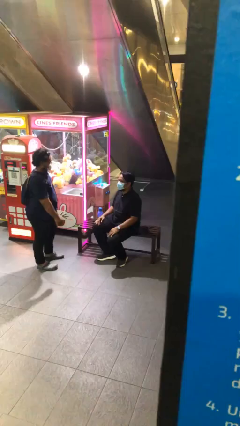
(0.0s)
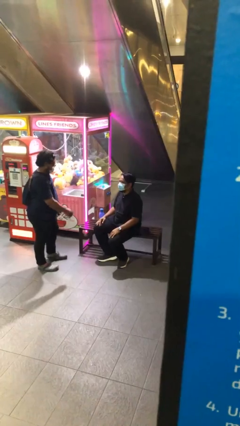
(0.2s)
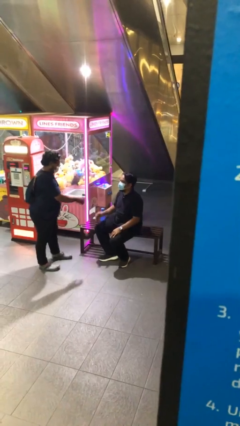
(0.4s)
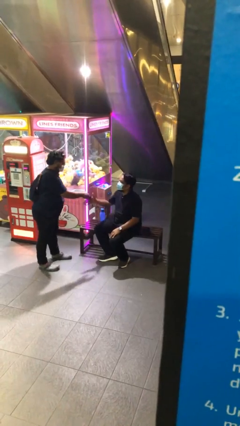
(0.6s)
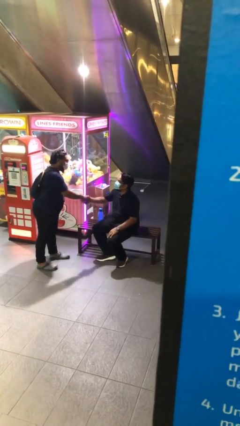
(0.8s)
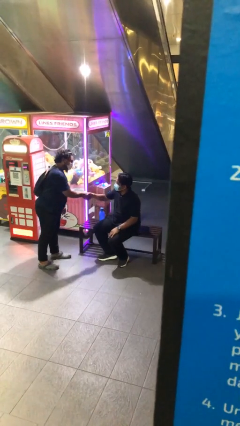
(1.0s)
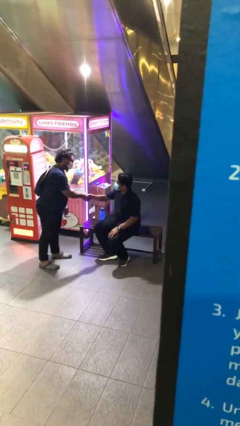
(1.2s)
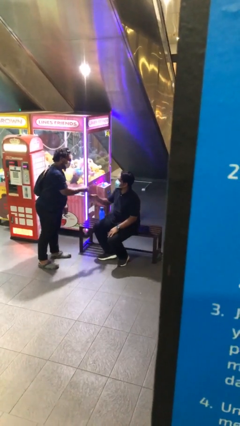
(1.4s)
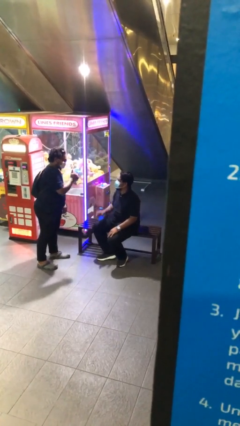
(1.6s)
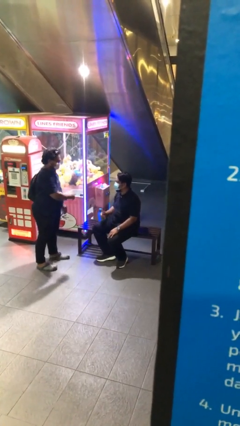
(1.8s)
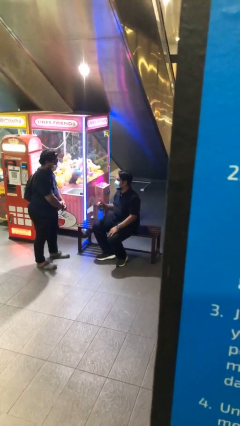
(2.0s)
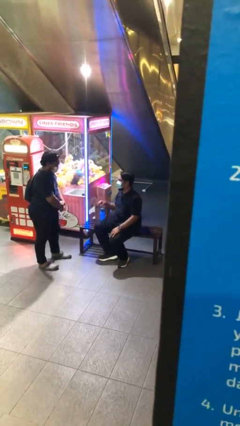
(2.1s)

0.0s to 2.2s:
person shakes hand

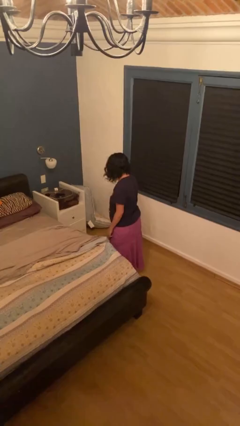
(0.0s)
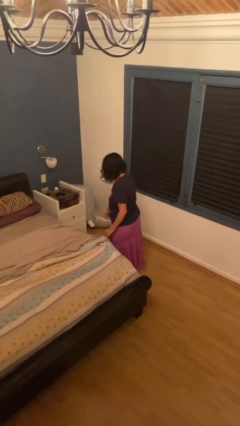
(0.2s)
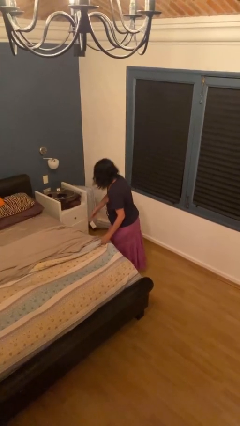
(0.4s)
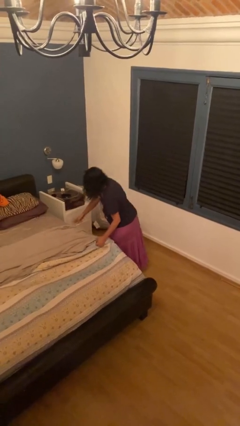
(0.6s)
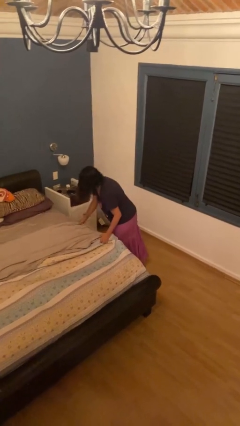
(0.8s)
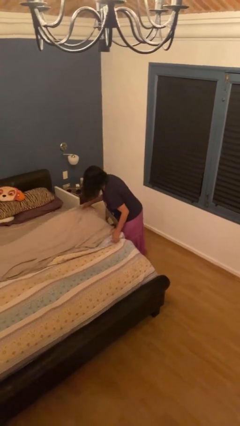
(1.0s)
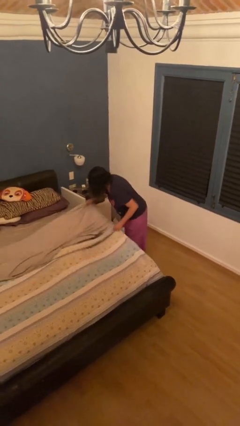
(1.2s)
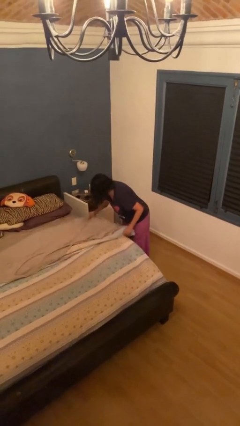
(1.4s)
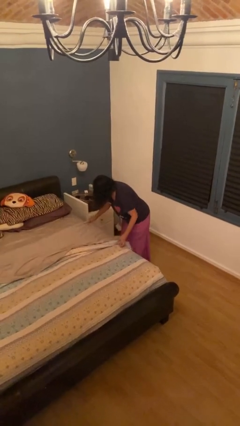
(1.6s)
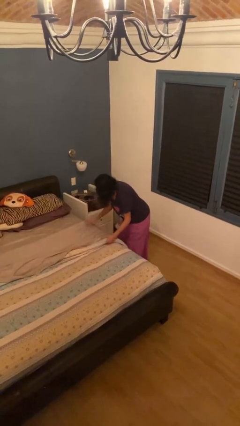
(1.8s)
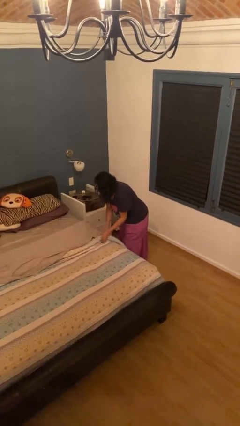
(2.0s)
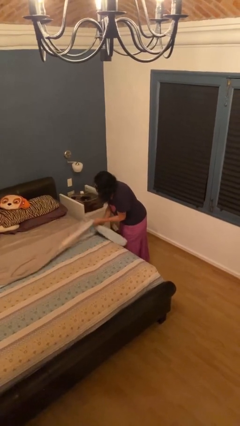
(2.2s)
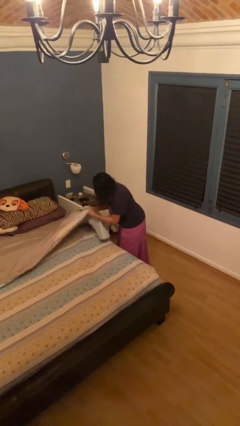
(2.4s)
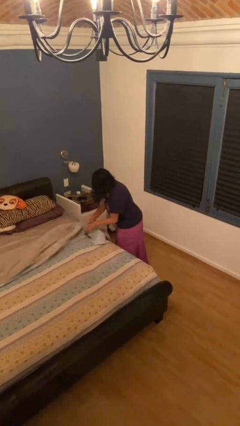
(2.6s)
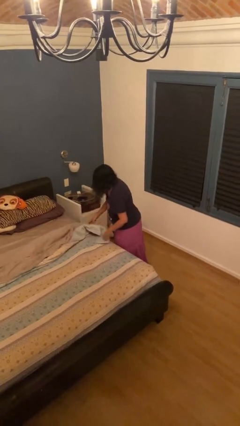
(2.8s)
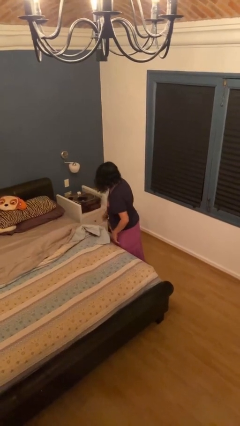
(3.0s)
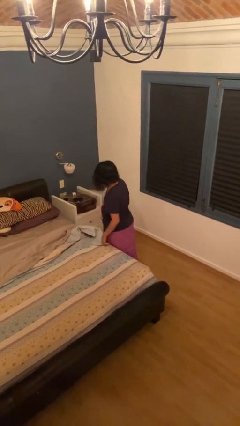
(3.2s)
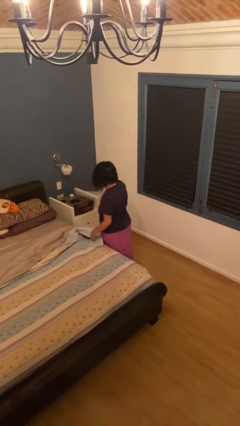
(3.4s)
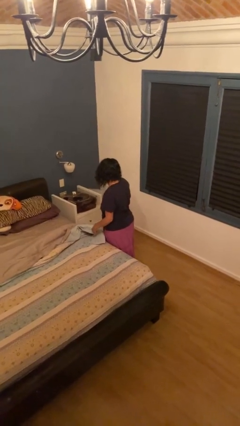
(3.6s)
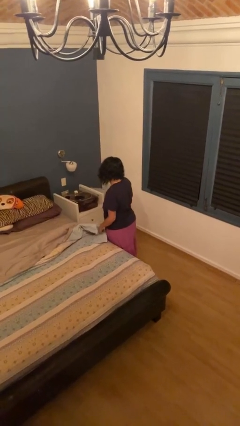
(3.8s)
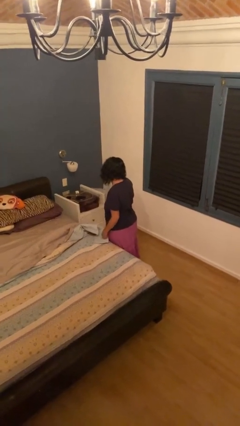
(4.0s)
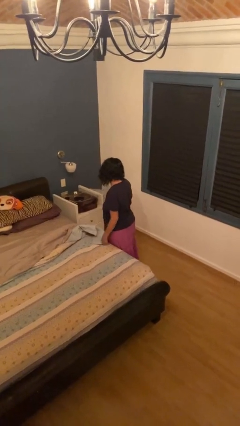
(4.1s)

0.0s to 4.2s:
person makes bed

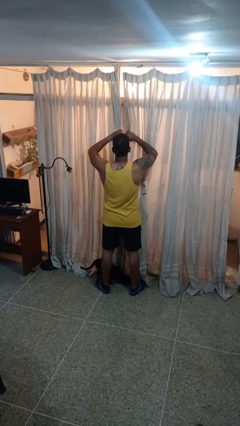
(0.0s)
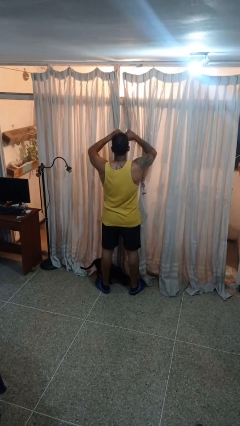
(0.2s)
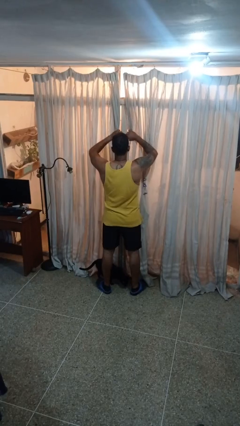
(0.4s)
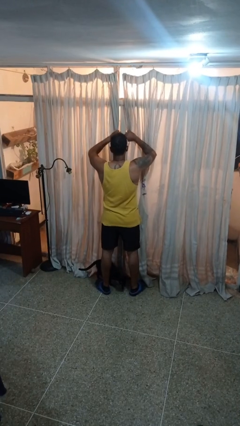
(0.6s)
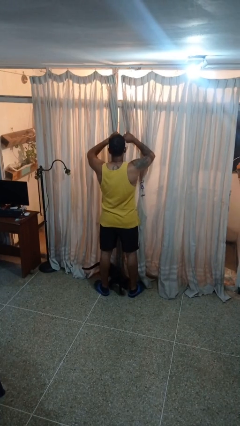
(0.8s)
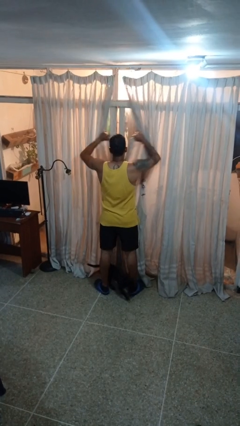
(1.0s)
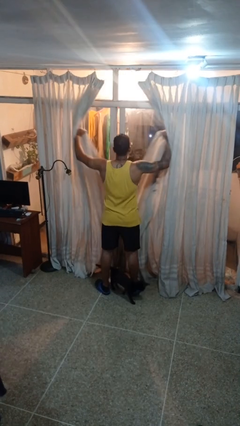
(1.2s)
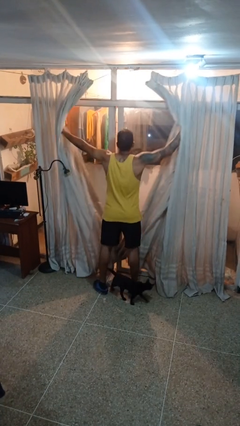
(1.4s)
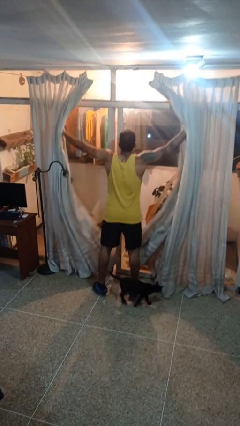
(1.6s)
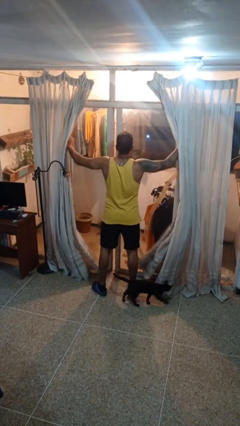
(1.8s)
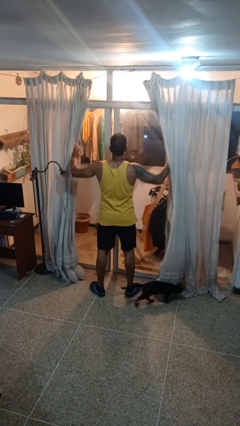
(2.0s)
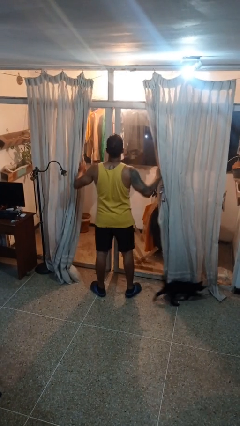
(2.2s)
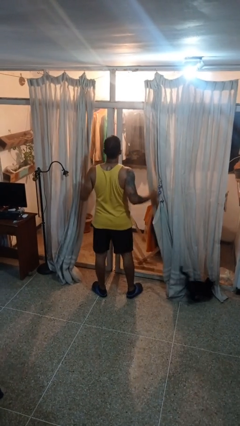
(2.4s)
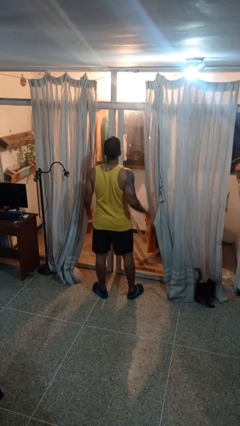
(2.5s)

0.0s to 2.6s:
person opens curtains

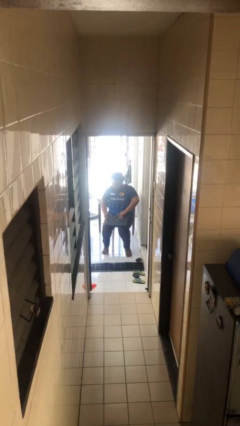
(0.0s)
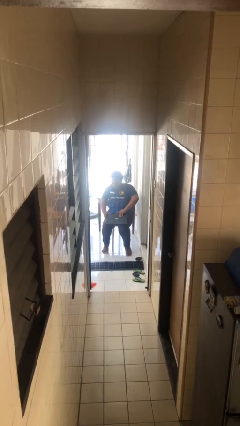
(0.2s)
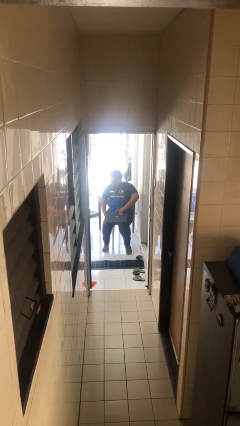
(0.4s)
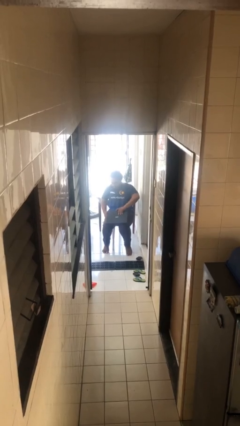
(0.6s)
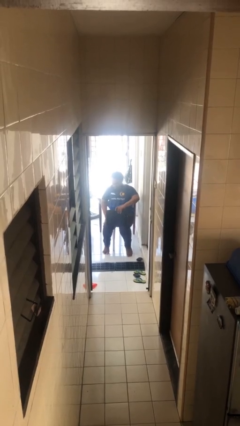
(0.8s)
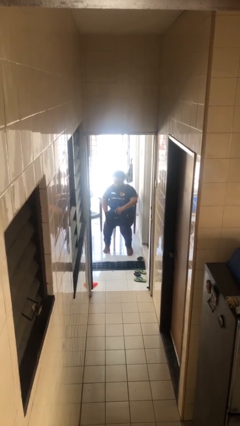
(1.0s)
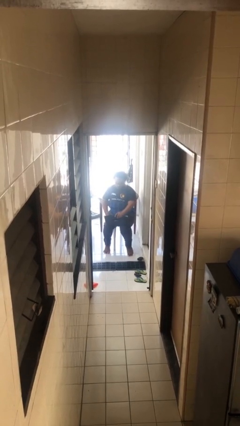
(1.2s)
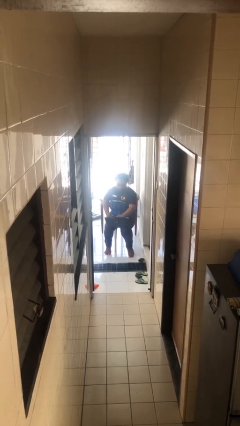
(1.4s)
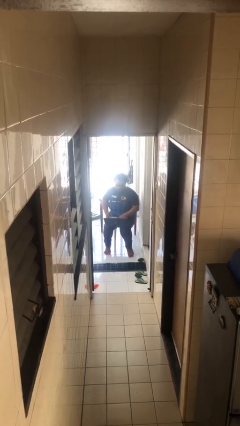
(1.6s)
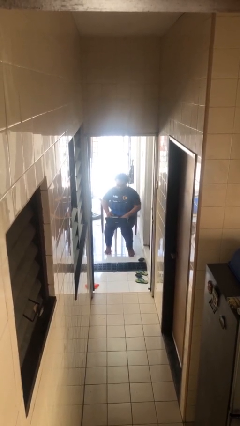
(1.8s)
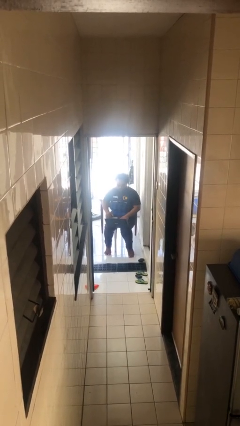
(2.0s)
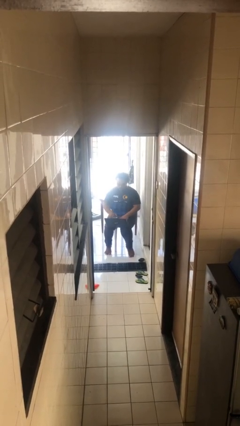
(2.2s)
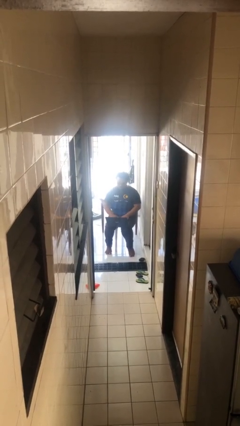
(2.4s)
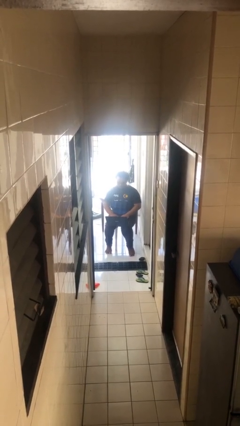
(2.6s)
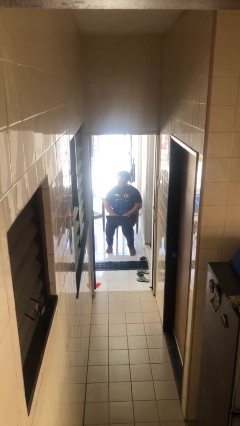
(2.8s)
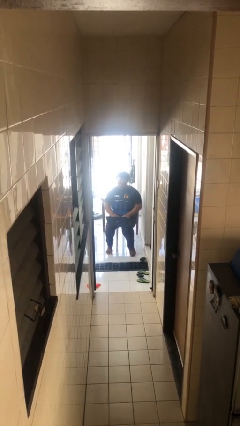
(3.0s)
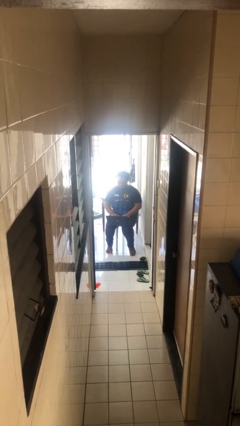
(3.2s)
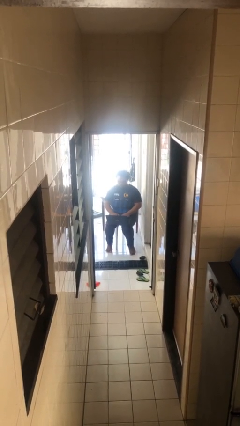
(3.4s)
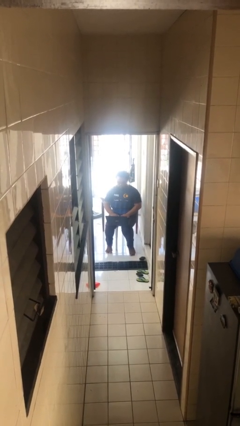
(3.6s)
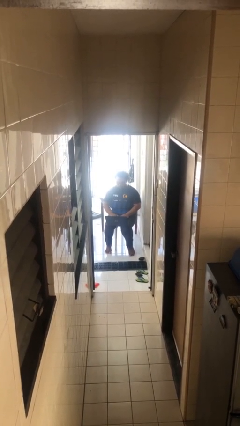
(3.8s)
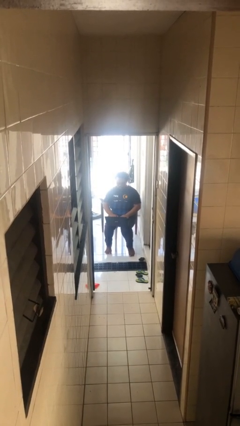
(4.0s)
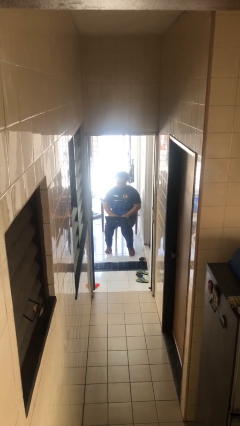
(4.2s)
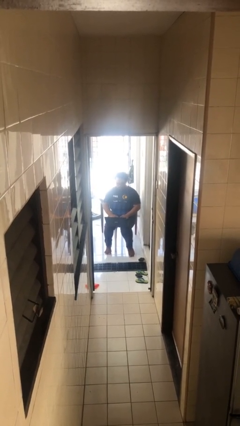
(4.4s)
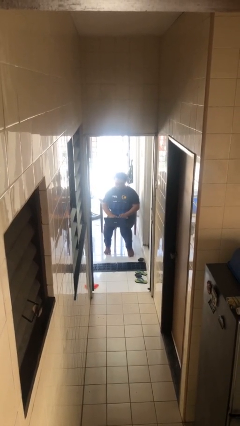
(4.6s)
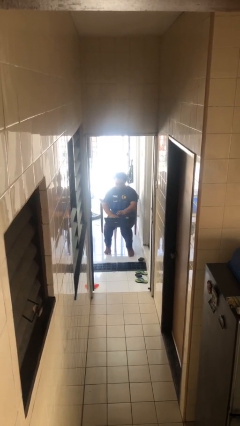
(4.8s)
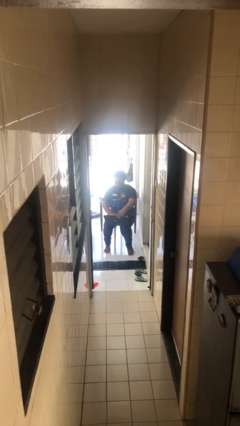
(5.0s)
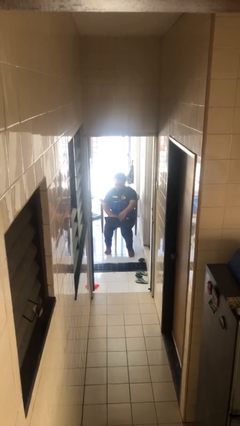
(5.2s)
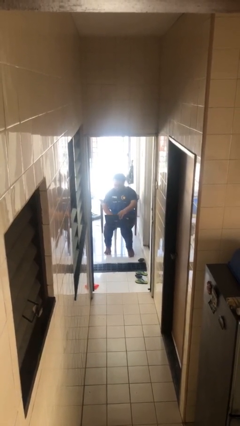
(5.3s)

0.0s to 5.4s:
person interacts with laptop

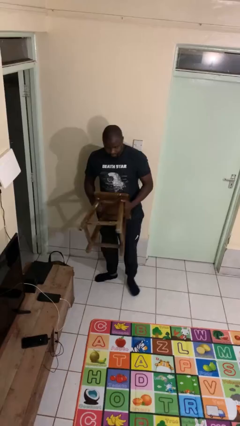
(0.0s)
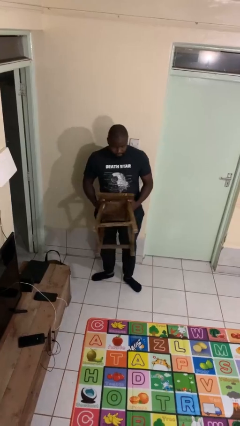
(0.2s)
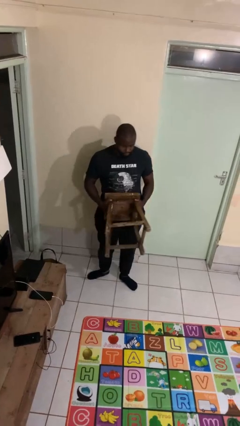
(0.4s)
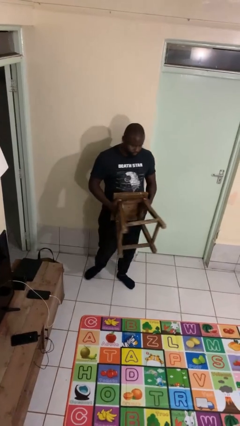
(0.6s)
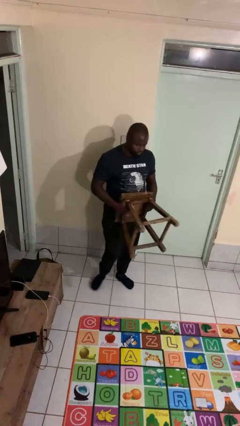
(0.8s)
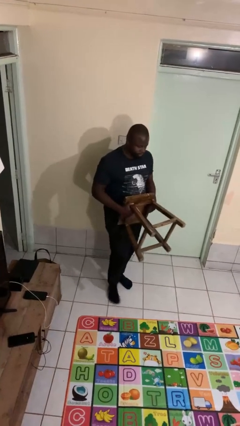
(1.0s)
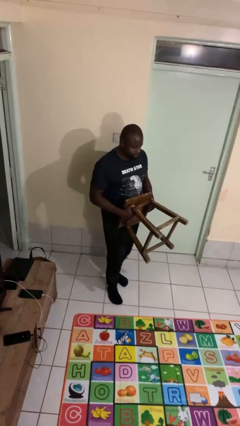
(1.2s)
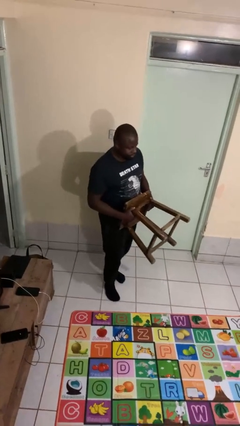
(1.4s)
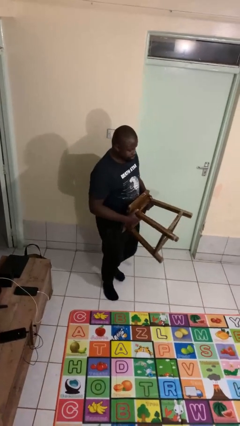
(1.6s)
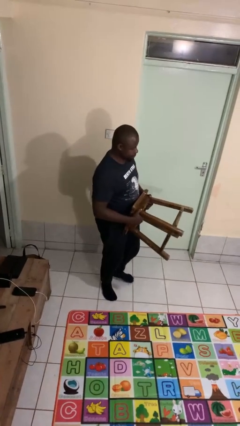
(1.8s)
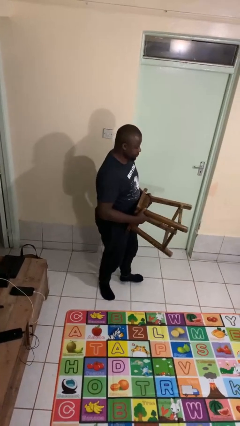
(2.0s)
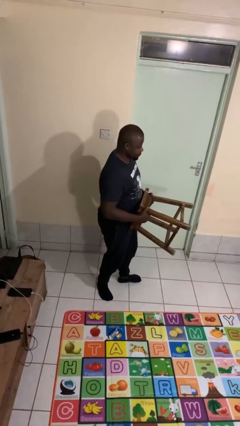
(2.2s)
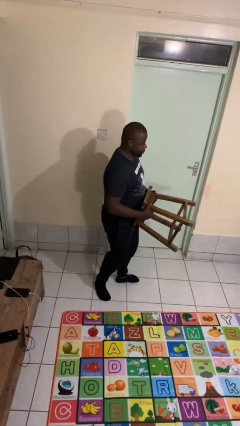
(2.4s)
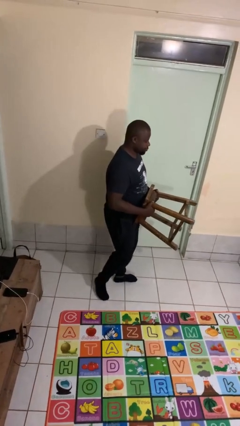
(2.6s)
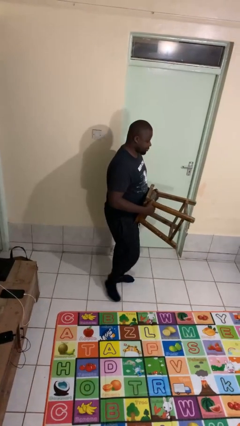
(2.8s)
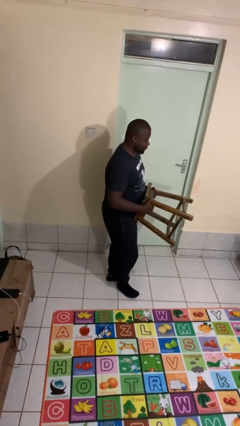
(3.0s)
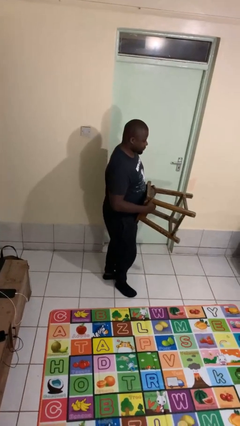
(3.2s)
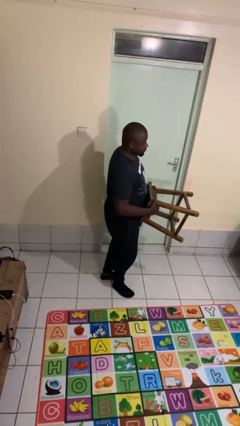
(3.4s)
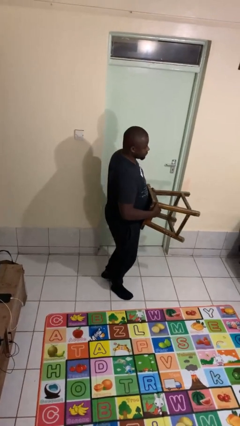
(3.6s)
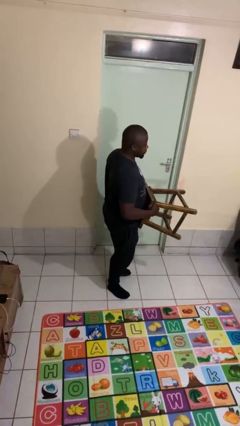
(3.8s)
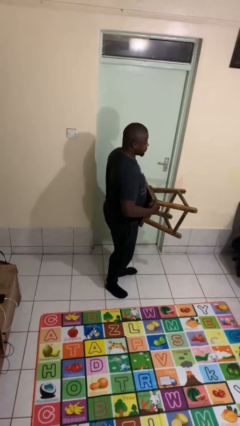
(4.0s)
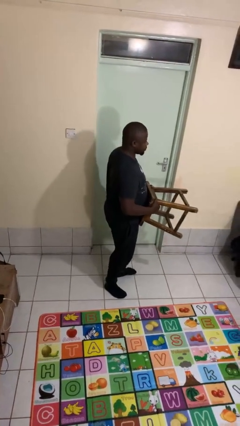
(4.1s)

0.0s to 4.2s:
person carries furniture
